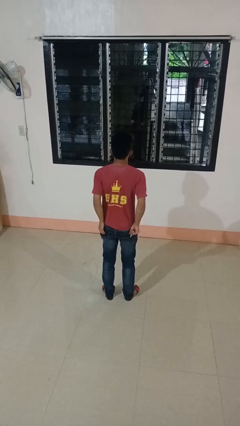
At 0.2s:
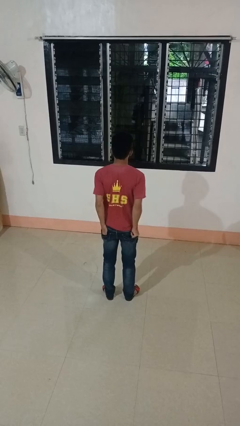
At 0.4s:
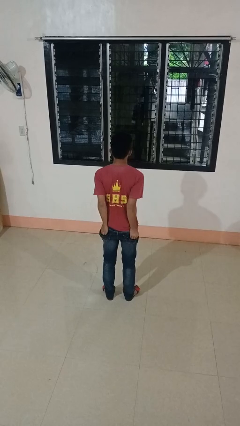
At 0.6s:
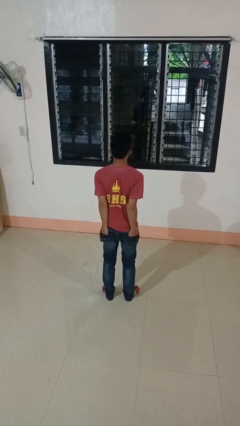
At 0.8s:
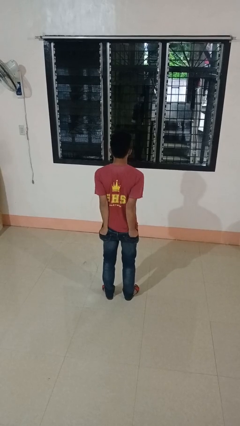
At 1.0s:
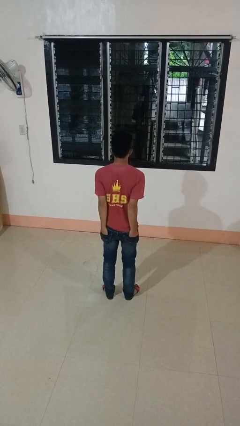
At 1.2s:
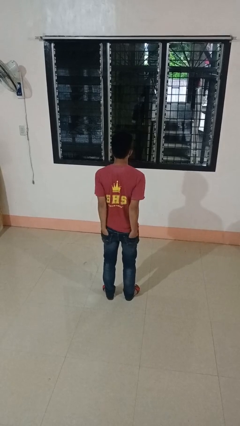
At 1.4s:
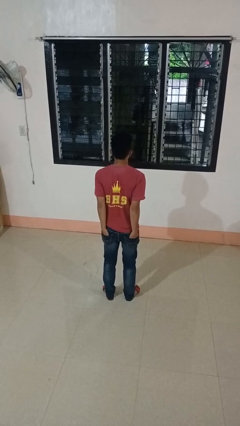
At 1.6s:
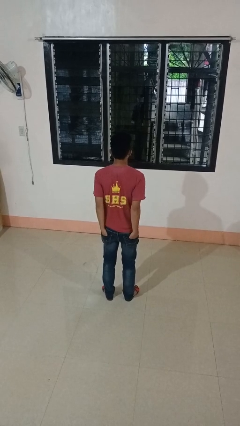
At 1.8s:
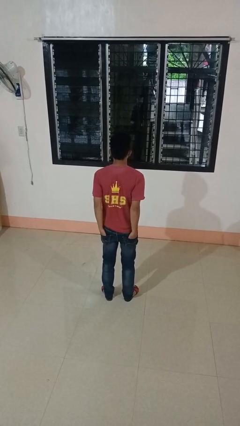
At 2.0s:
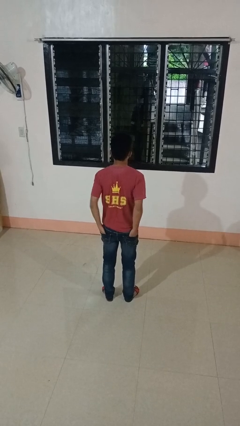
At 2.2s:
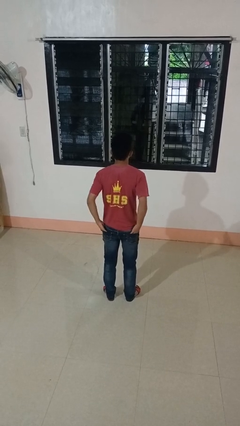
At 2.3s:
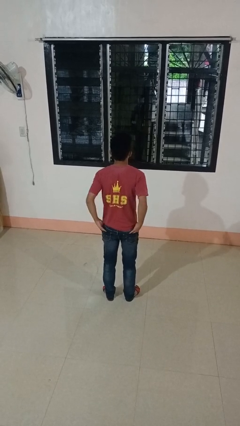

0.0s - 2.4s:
person puts hands in back pockets

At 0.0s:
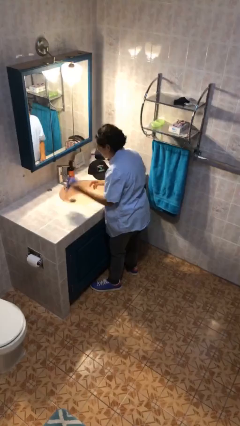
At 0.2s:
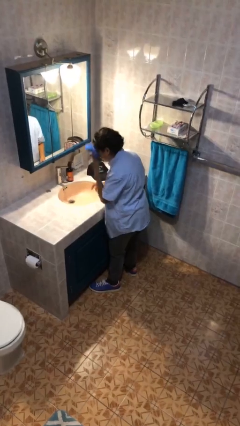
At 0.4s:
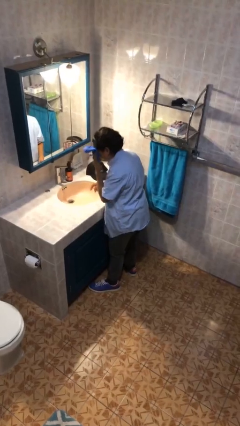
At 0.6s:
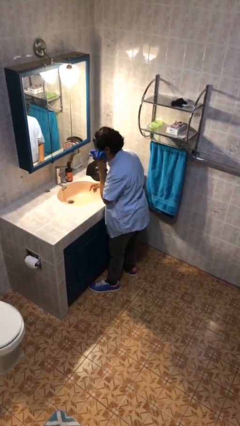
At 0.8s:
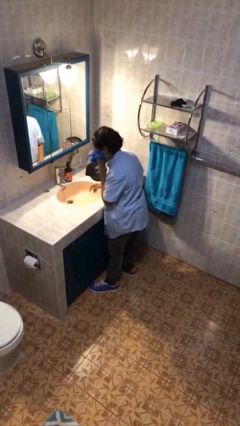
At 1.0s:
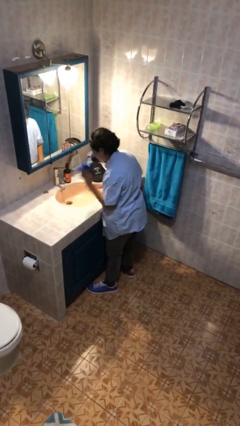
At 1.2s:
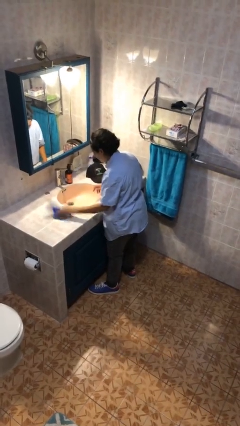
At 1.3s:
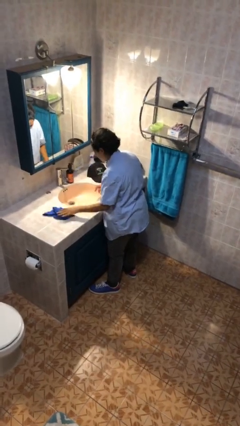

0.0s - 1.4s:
person dries face with towel

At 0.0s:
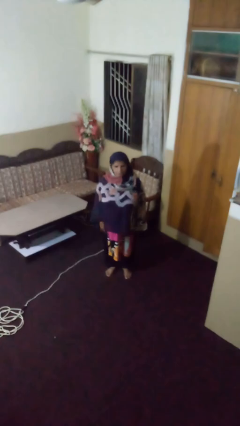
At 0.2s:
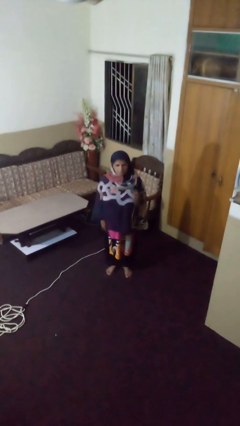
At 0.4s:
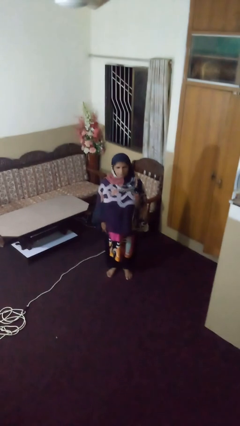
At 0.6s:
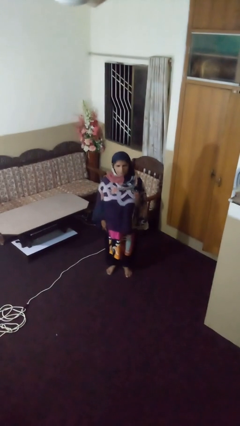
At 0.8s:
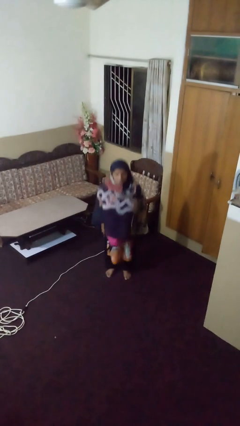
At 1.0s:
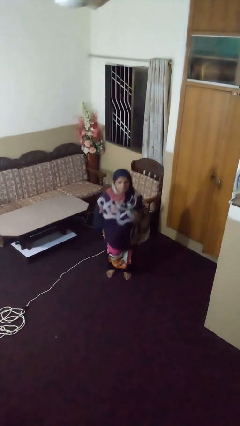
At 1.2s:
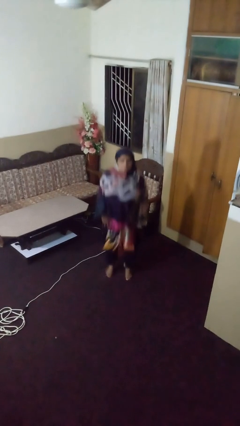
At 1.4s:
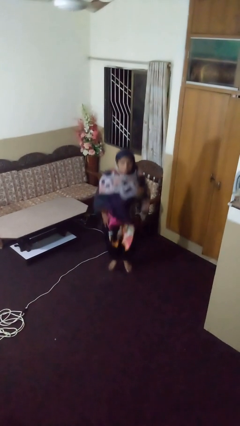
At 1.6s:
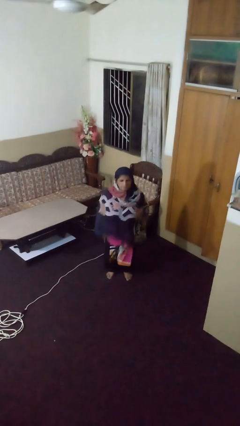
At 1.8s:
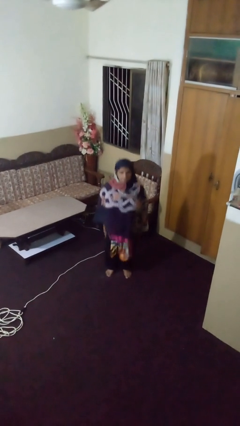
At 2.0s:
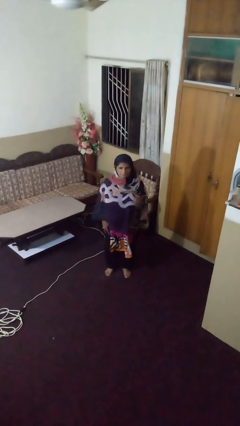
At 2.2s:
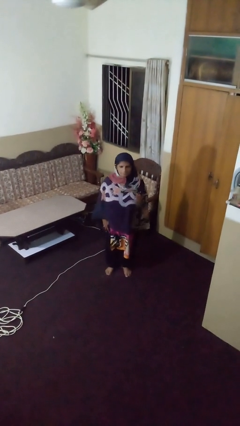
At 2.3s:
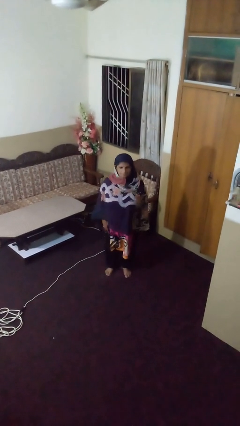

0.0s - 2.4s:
person jumps

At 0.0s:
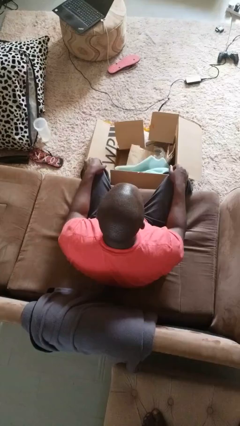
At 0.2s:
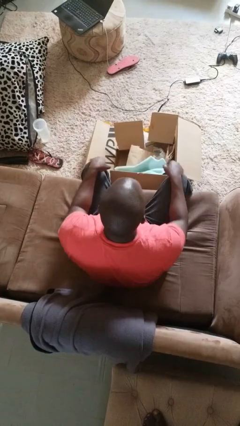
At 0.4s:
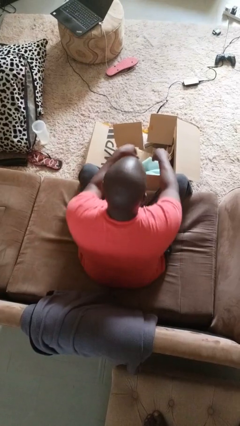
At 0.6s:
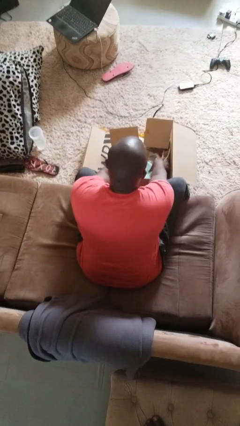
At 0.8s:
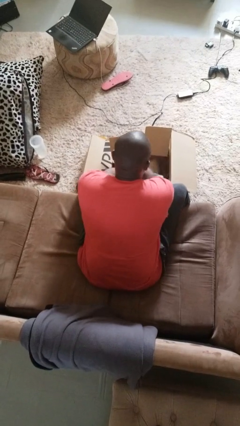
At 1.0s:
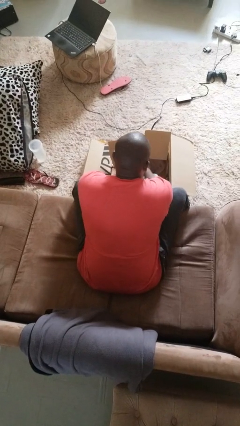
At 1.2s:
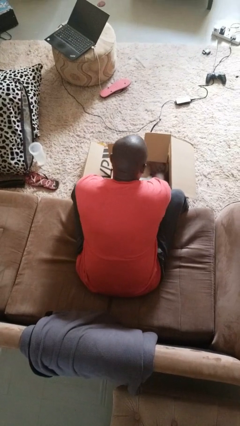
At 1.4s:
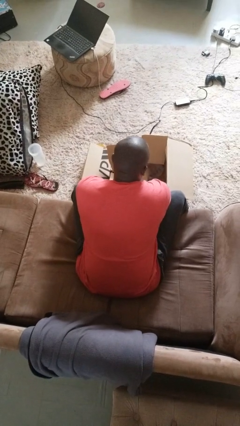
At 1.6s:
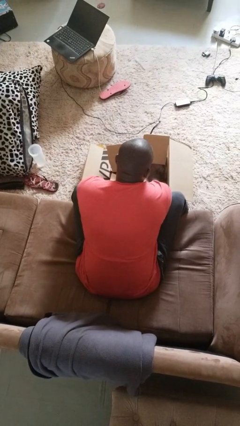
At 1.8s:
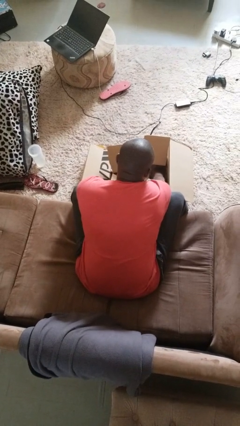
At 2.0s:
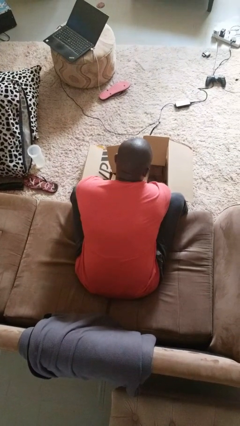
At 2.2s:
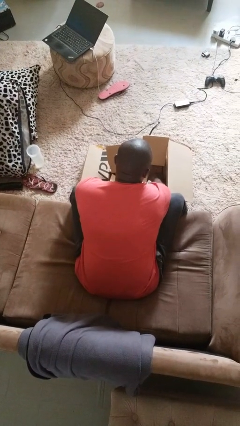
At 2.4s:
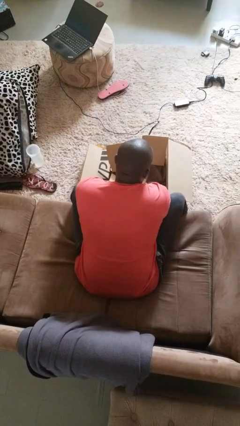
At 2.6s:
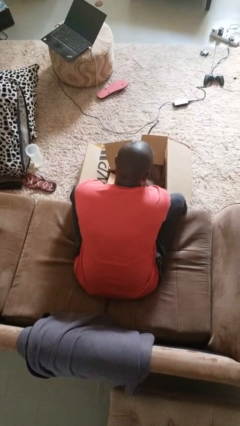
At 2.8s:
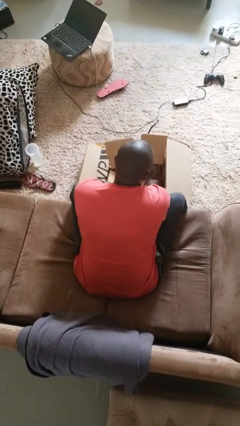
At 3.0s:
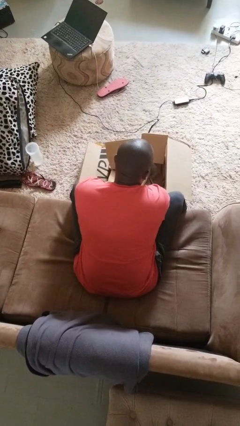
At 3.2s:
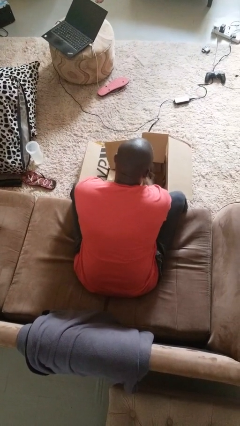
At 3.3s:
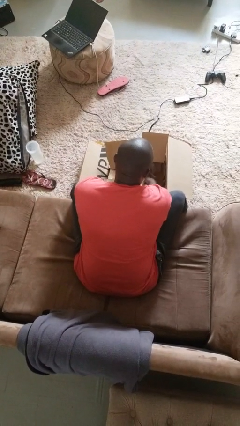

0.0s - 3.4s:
person searches in box

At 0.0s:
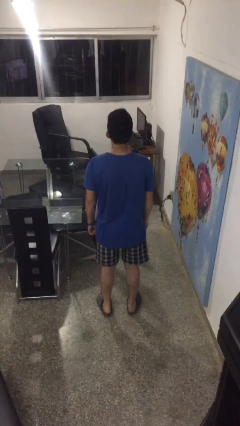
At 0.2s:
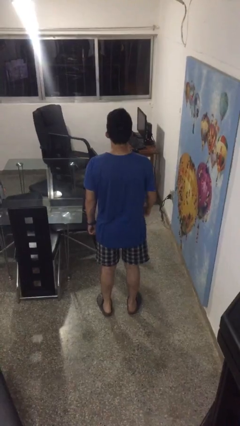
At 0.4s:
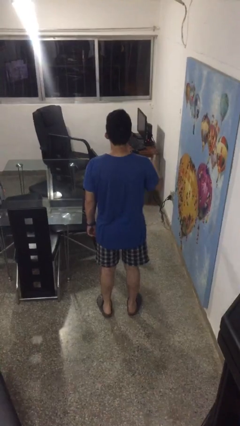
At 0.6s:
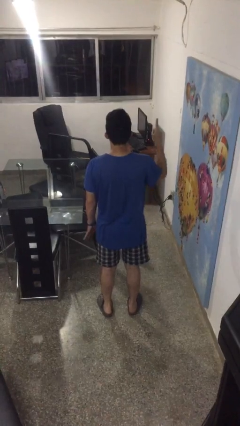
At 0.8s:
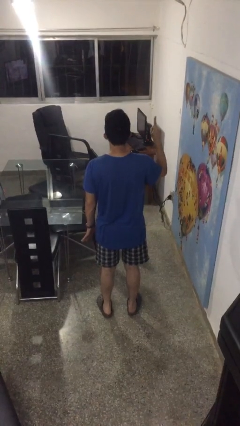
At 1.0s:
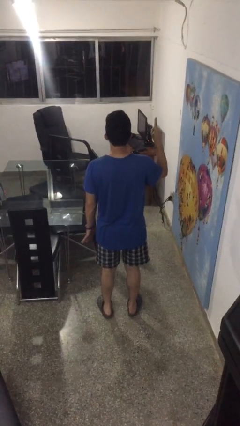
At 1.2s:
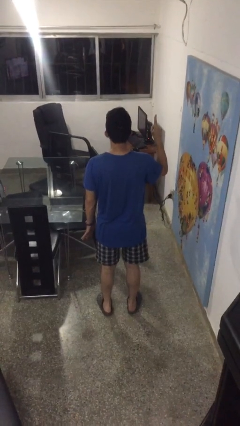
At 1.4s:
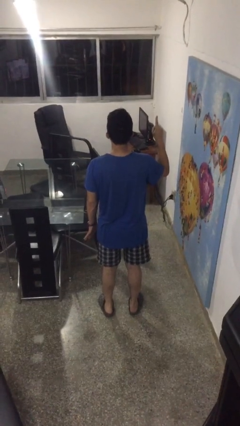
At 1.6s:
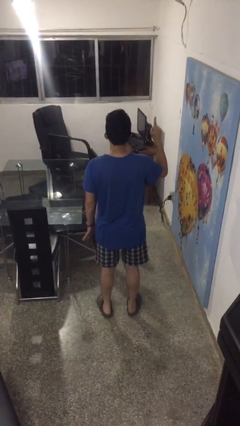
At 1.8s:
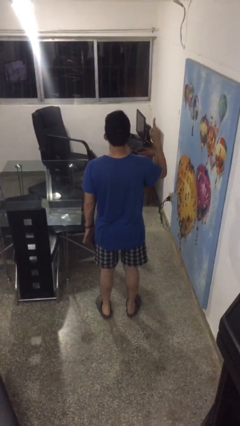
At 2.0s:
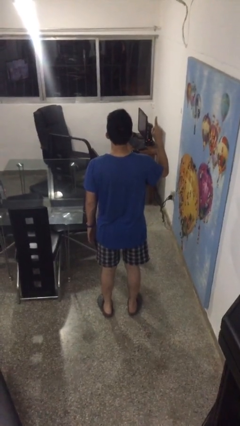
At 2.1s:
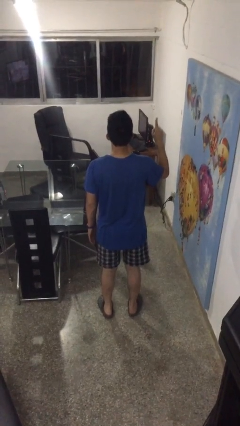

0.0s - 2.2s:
person gestures number one

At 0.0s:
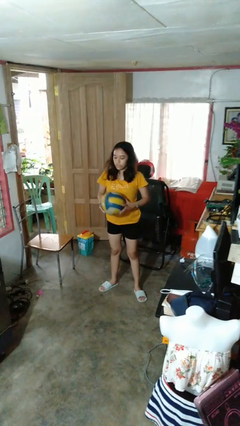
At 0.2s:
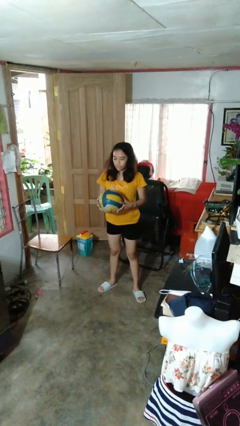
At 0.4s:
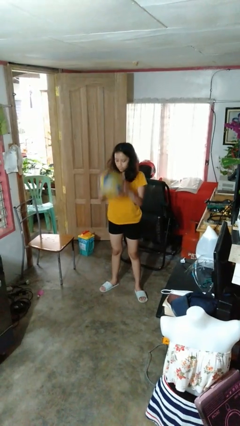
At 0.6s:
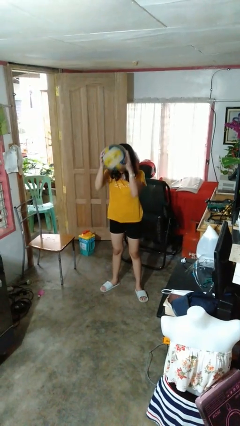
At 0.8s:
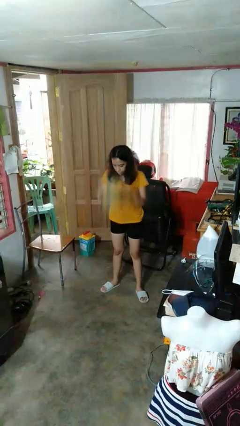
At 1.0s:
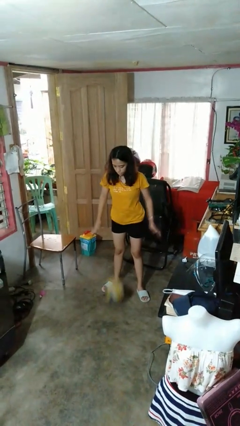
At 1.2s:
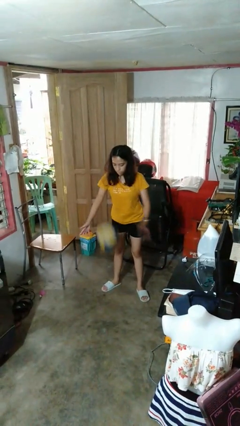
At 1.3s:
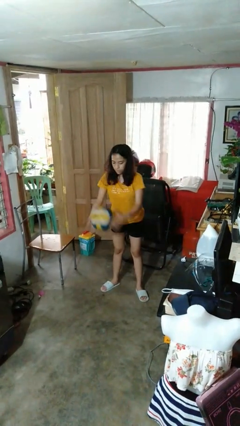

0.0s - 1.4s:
person bounces ball on floor

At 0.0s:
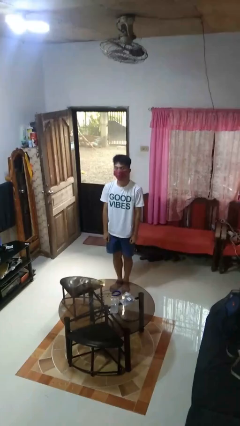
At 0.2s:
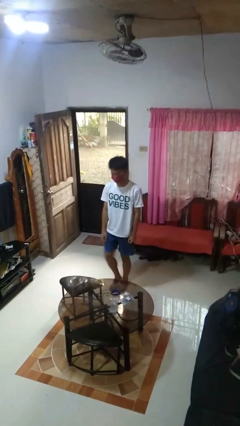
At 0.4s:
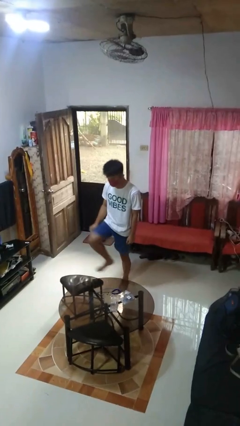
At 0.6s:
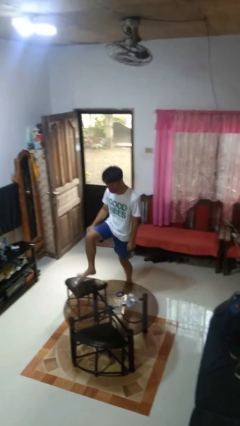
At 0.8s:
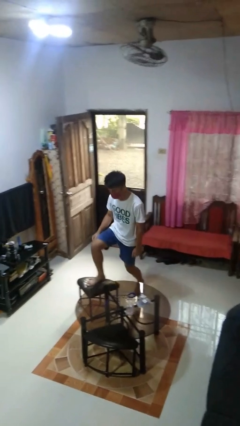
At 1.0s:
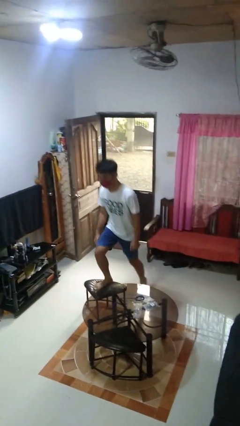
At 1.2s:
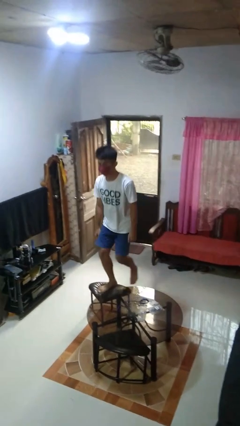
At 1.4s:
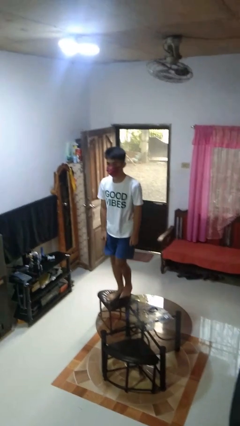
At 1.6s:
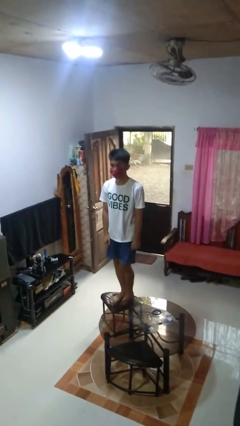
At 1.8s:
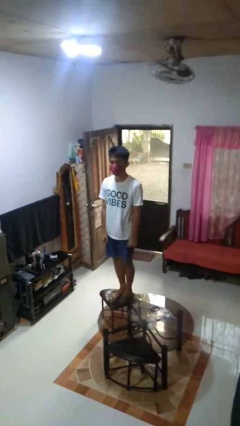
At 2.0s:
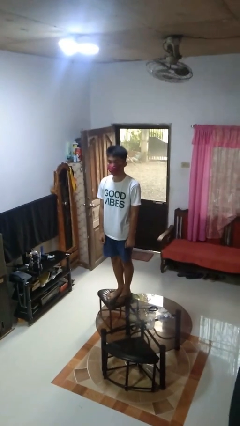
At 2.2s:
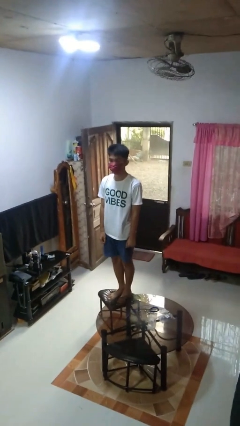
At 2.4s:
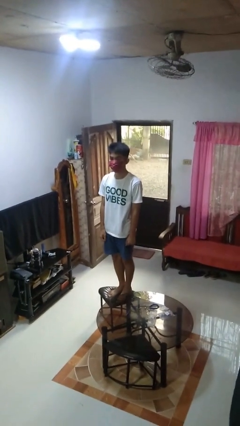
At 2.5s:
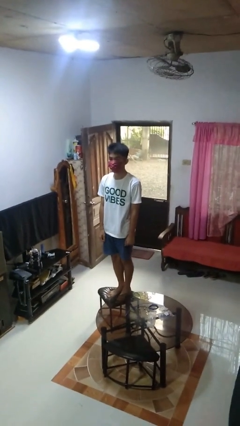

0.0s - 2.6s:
person climbs on chair

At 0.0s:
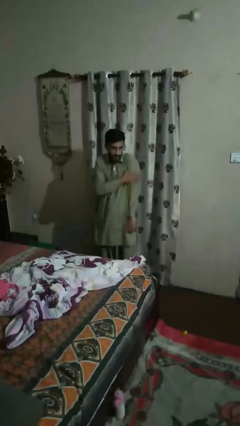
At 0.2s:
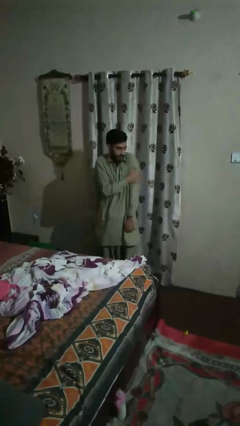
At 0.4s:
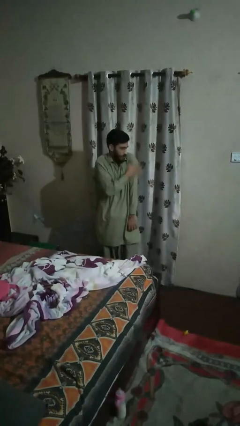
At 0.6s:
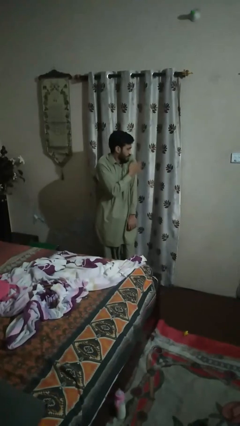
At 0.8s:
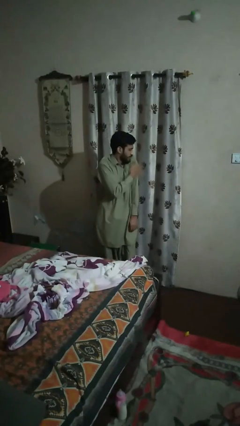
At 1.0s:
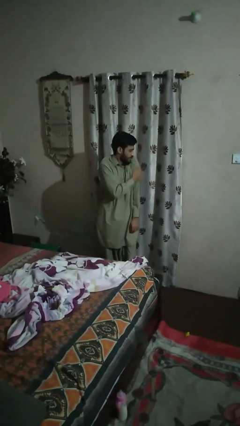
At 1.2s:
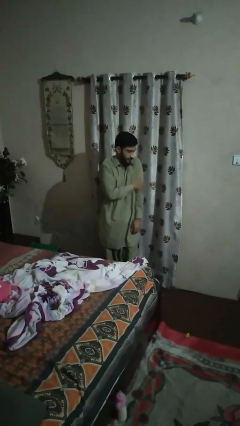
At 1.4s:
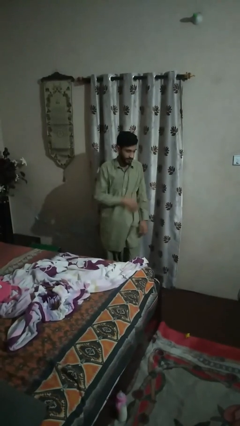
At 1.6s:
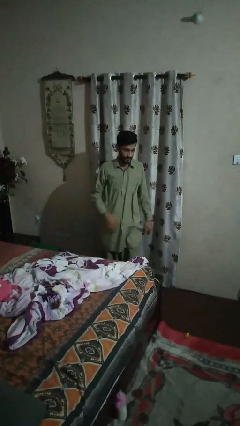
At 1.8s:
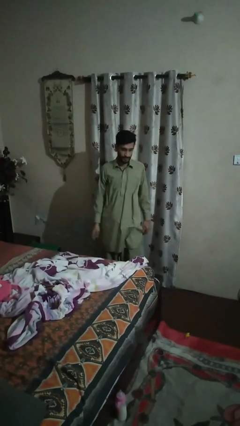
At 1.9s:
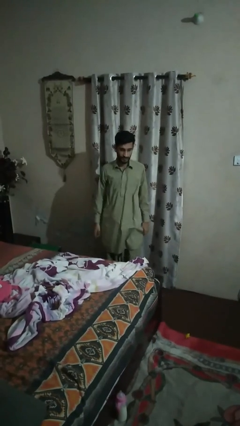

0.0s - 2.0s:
person swats bug
